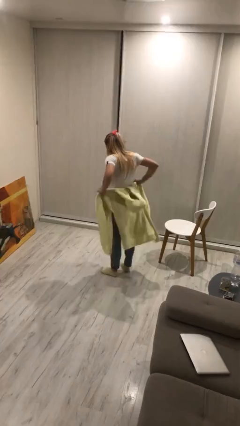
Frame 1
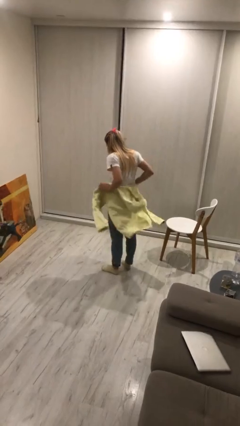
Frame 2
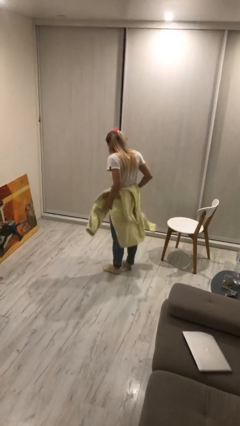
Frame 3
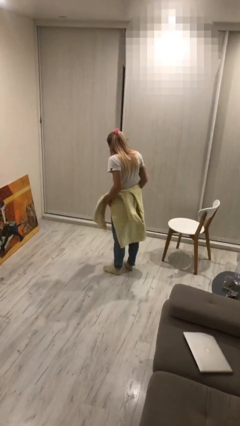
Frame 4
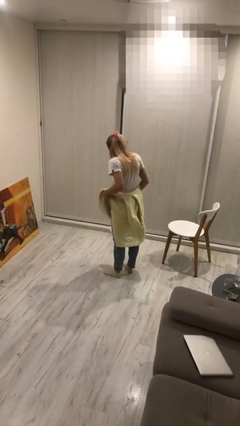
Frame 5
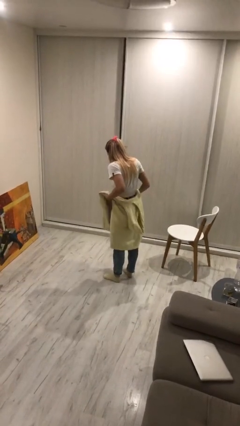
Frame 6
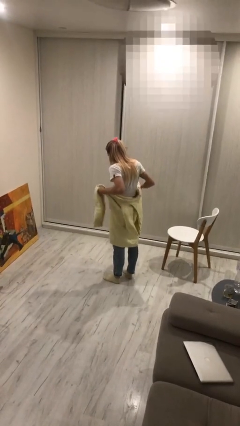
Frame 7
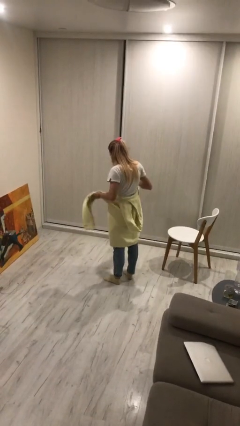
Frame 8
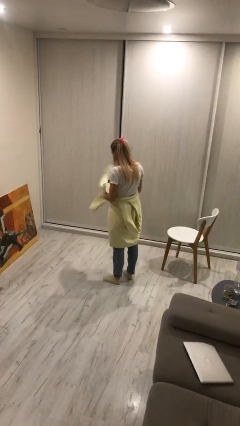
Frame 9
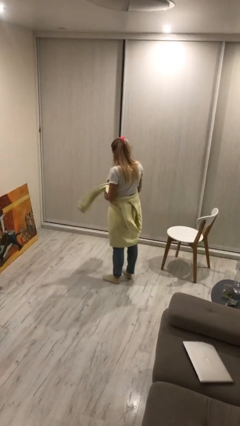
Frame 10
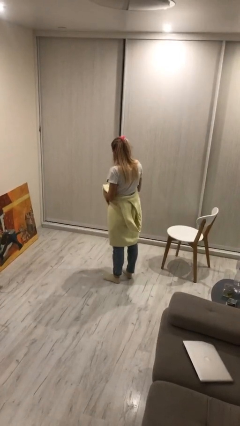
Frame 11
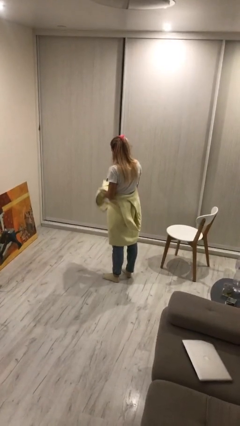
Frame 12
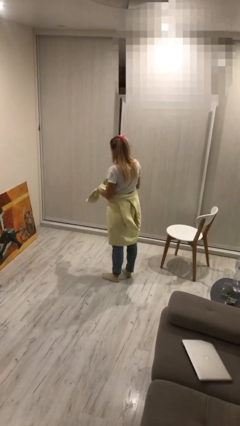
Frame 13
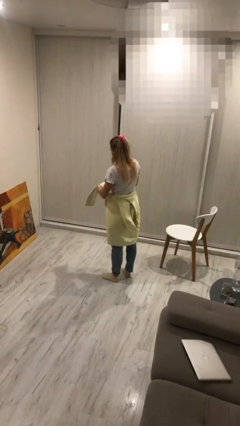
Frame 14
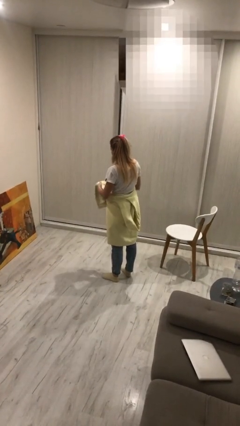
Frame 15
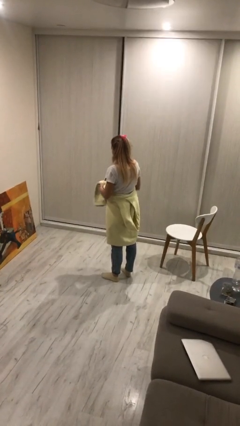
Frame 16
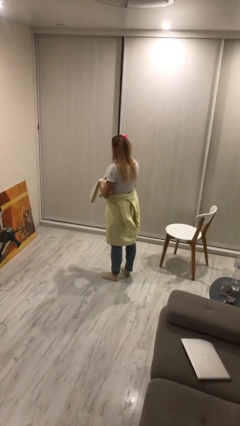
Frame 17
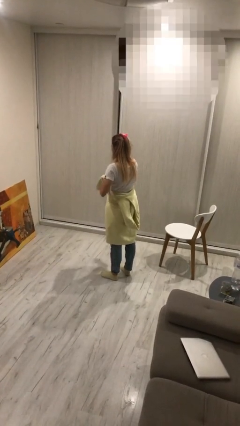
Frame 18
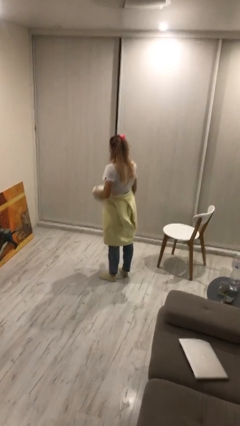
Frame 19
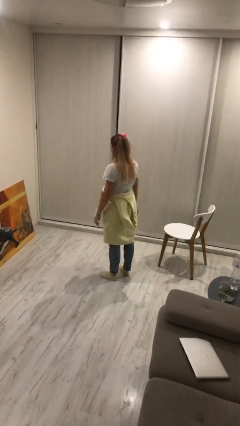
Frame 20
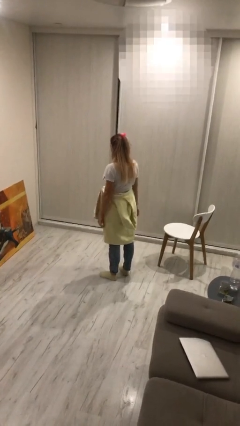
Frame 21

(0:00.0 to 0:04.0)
person ties jacket around waist

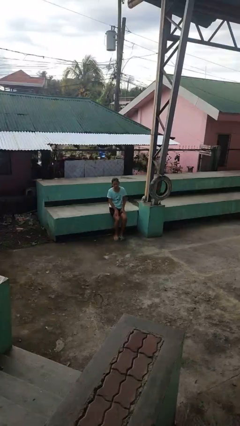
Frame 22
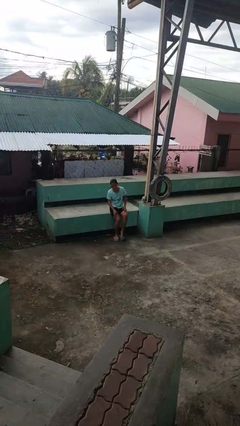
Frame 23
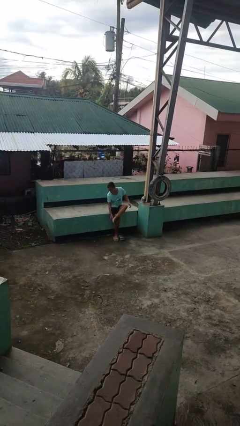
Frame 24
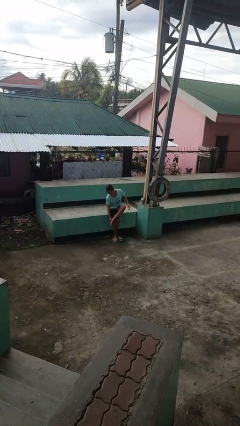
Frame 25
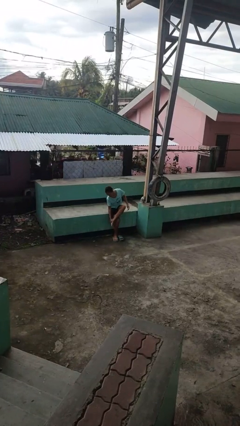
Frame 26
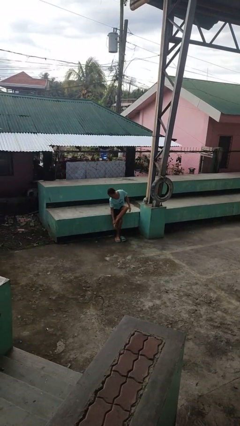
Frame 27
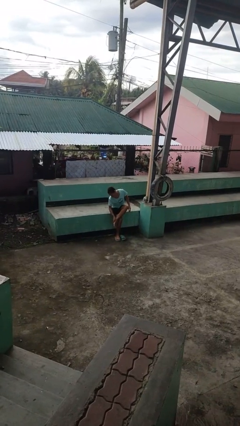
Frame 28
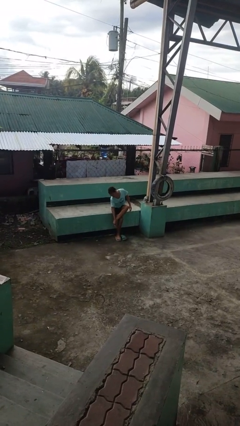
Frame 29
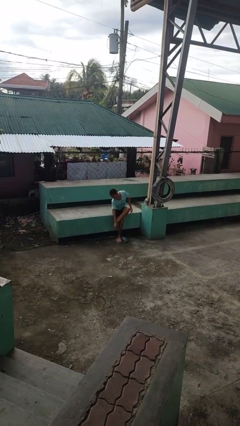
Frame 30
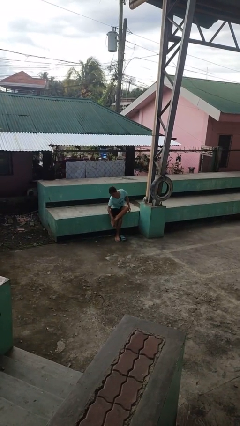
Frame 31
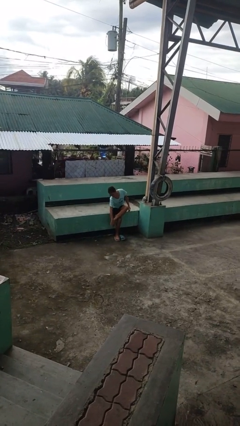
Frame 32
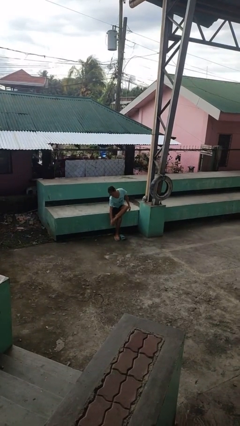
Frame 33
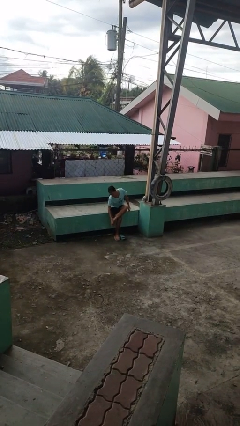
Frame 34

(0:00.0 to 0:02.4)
person rubs foot

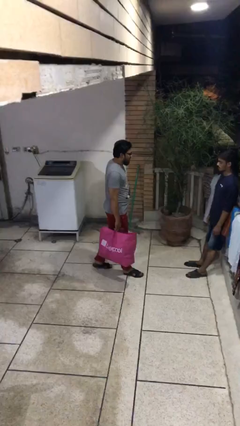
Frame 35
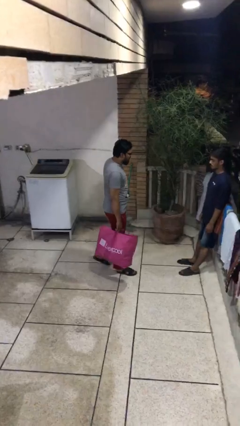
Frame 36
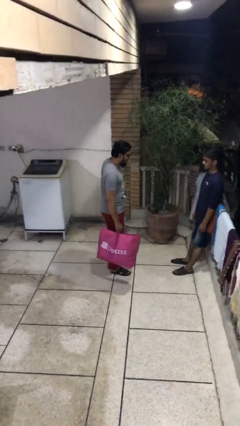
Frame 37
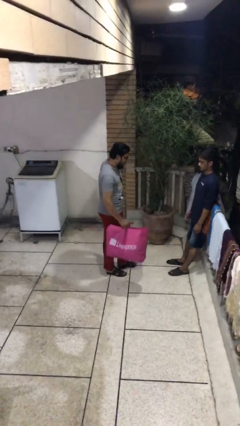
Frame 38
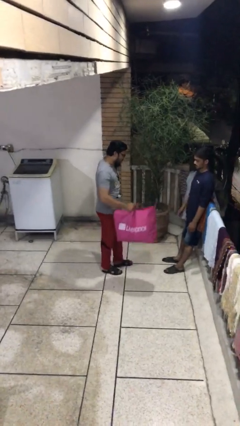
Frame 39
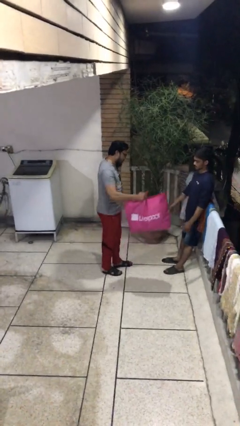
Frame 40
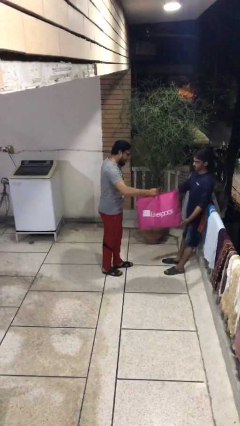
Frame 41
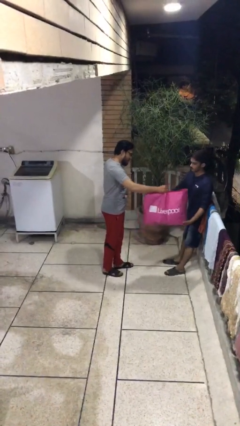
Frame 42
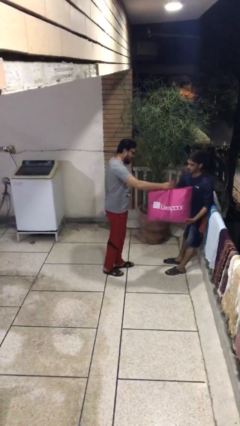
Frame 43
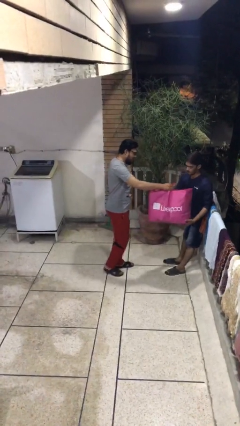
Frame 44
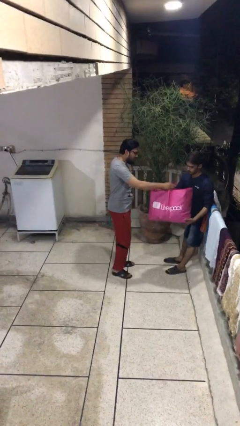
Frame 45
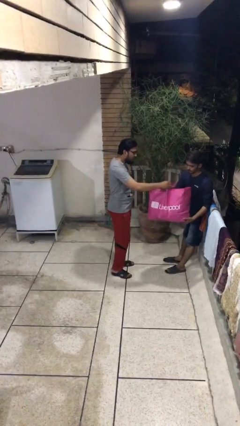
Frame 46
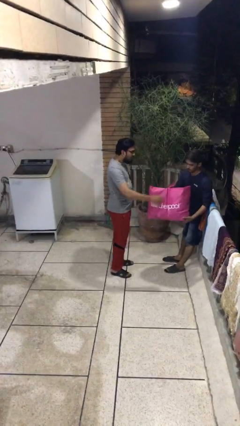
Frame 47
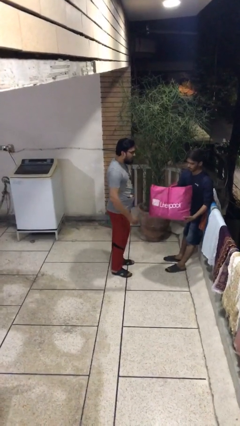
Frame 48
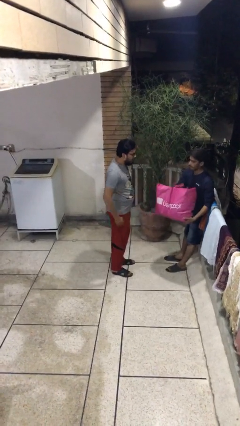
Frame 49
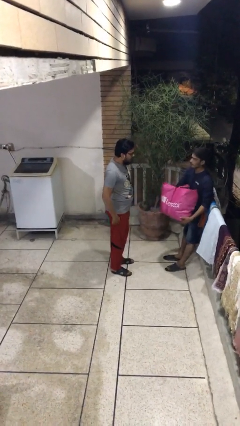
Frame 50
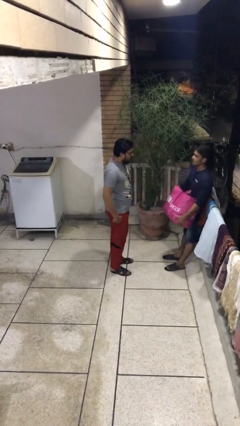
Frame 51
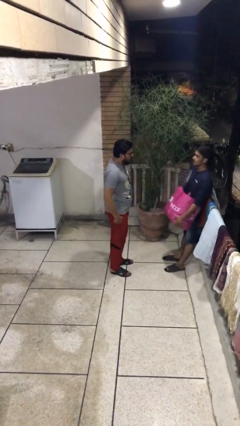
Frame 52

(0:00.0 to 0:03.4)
person transfers object to person

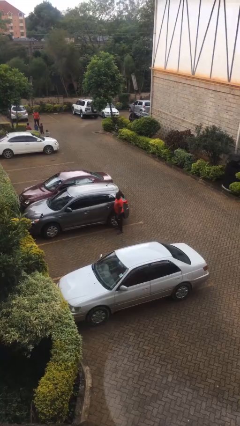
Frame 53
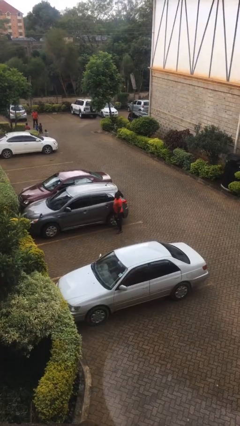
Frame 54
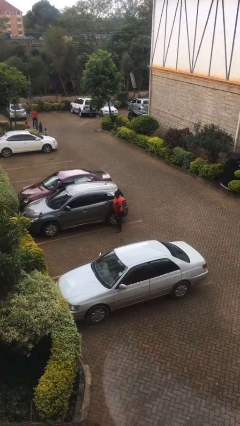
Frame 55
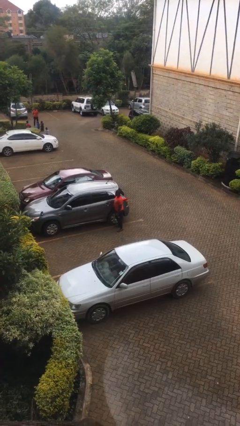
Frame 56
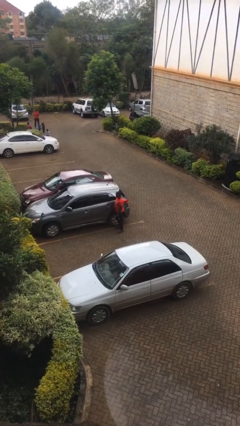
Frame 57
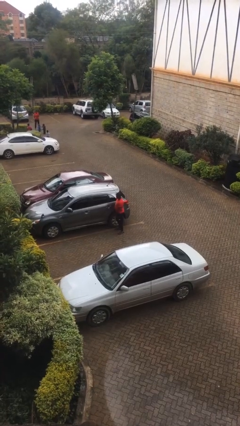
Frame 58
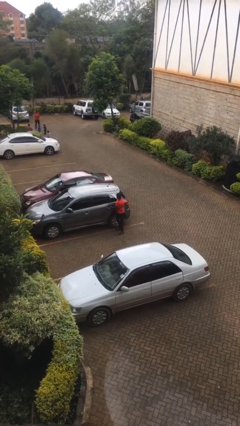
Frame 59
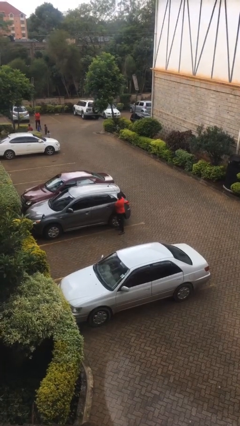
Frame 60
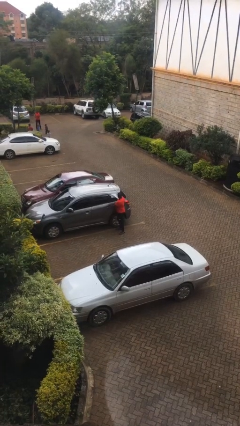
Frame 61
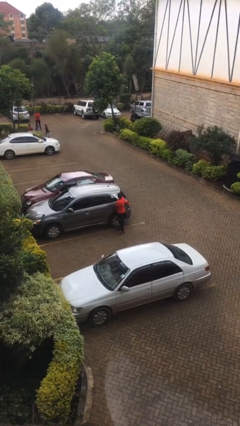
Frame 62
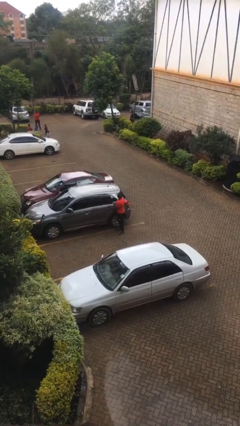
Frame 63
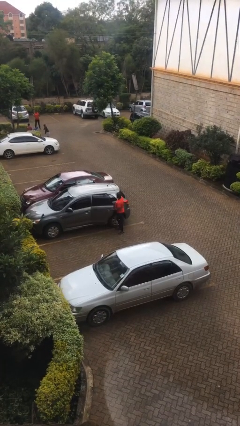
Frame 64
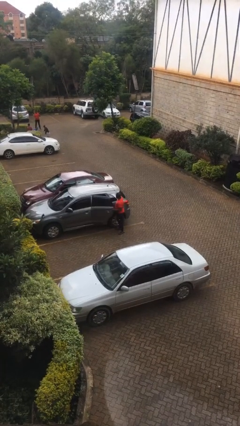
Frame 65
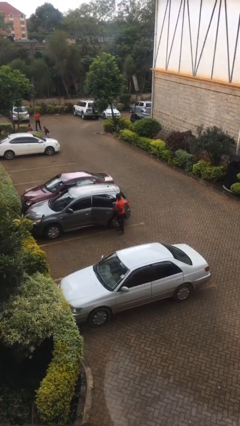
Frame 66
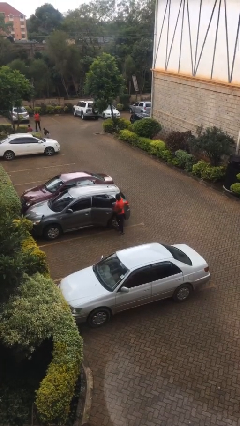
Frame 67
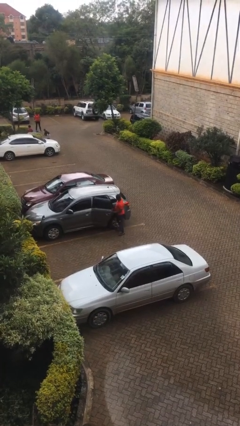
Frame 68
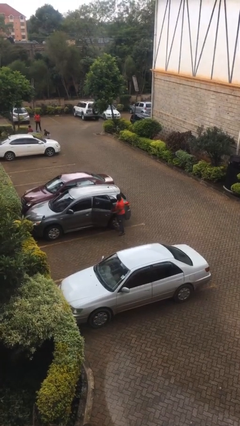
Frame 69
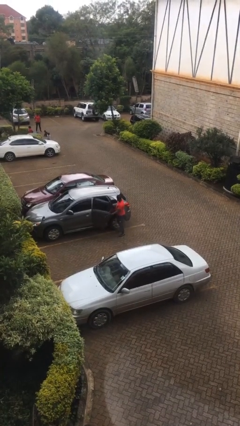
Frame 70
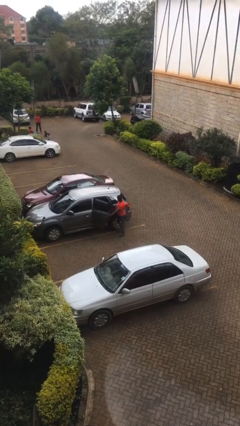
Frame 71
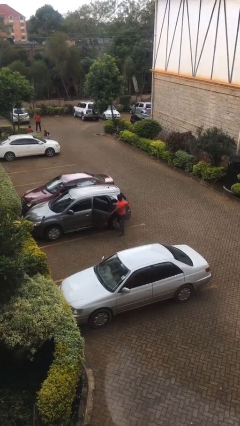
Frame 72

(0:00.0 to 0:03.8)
person opens car door

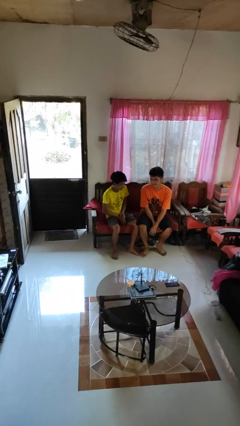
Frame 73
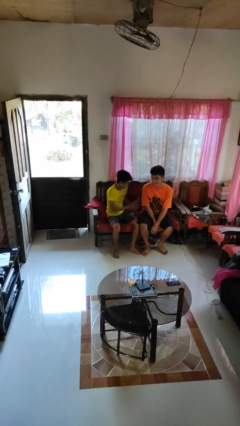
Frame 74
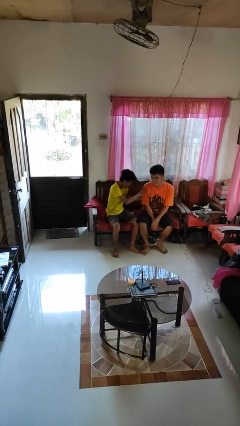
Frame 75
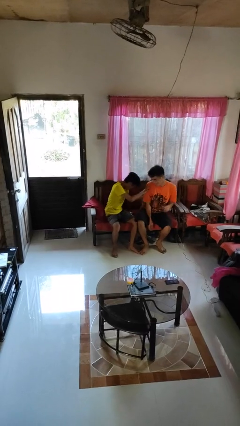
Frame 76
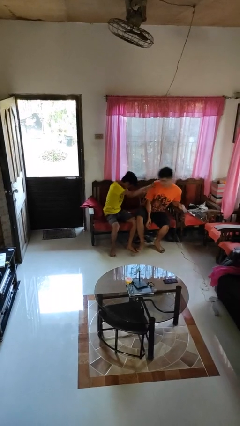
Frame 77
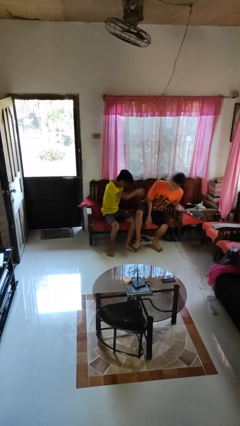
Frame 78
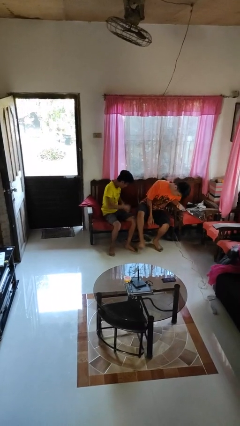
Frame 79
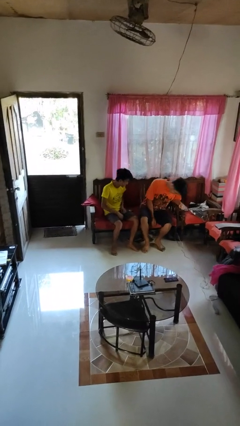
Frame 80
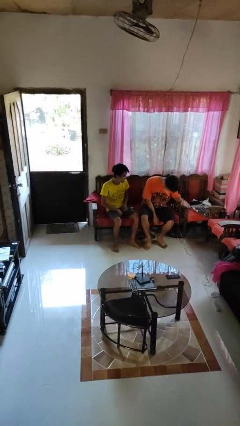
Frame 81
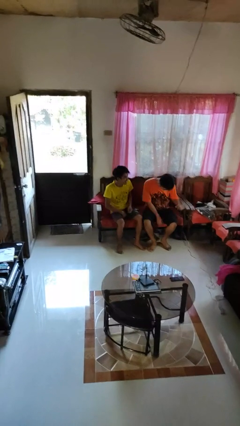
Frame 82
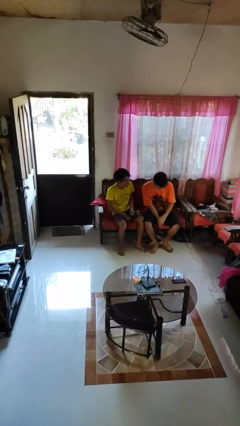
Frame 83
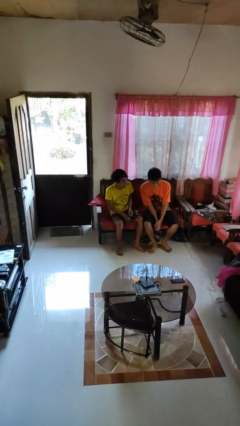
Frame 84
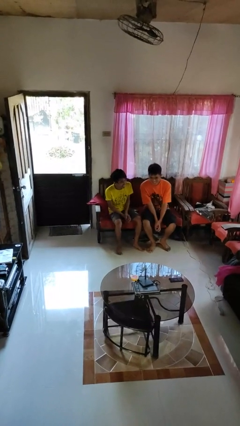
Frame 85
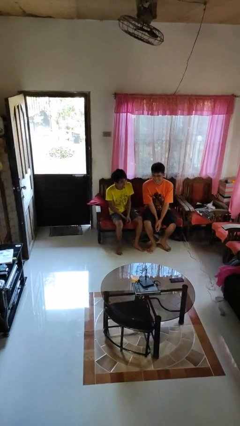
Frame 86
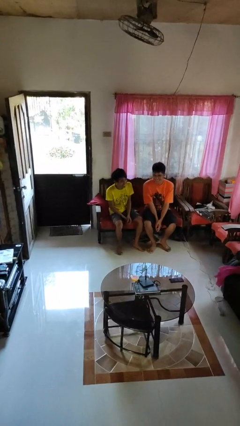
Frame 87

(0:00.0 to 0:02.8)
person shoves person

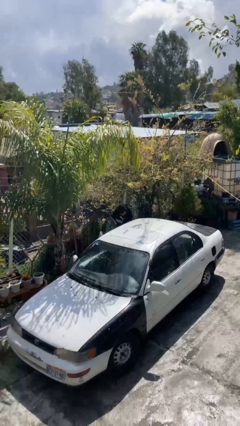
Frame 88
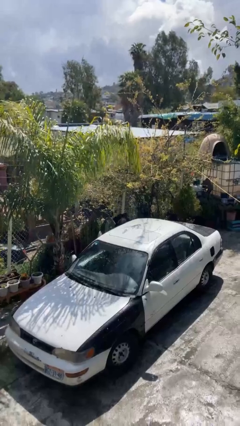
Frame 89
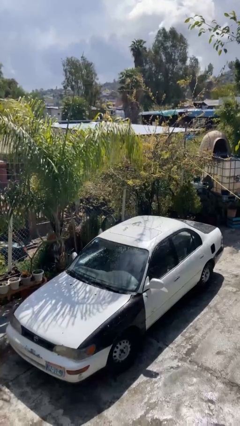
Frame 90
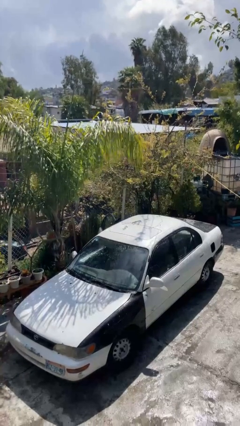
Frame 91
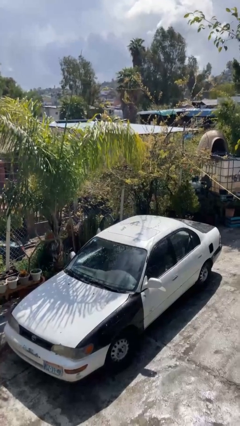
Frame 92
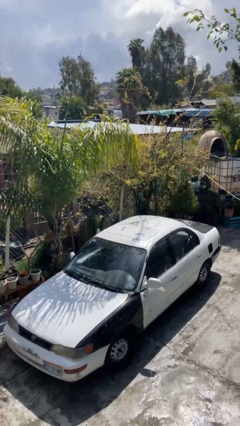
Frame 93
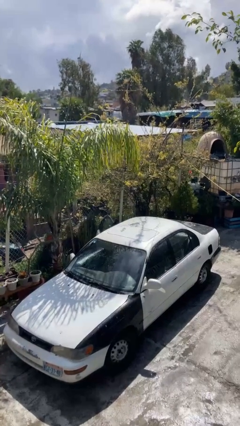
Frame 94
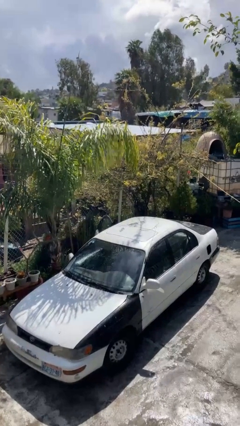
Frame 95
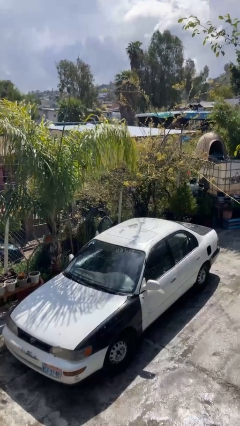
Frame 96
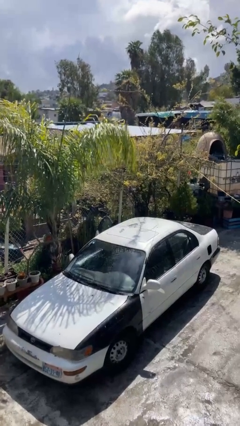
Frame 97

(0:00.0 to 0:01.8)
person enters car
